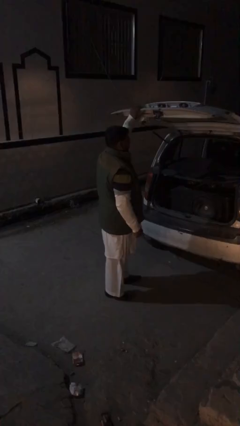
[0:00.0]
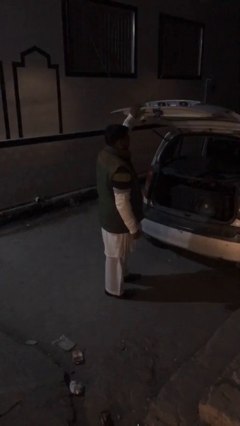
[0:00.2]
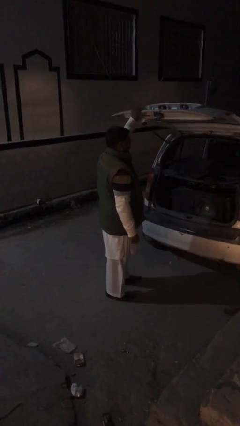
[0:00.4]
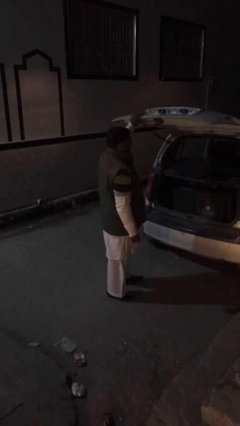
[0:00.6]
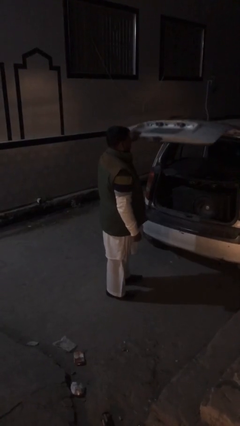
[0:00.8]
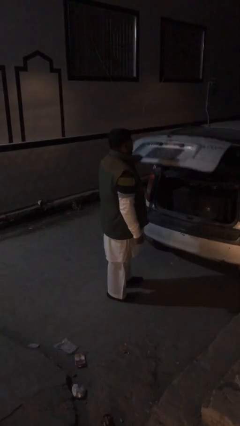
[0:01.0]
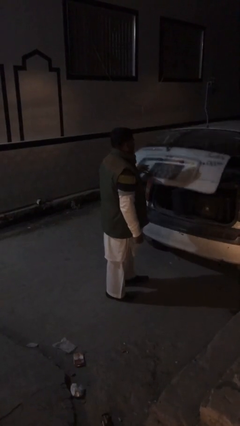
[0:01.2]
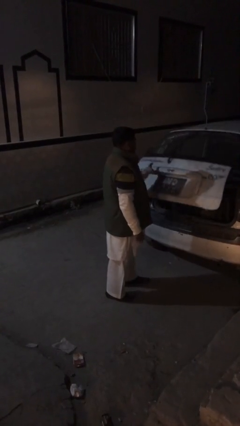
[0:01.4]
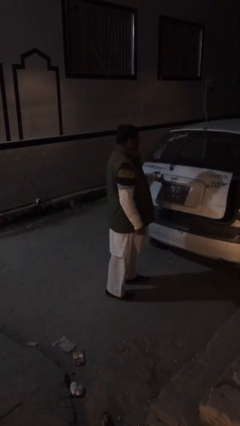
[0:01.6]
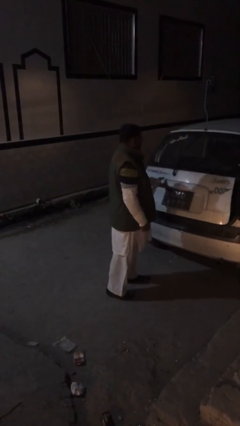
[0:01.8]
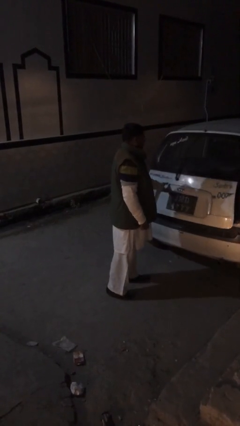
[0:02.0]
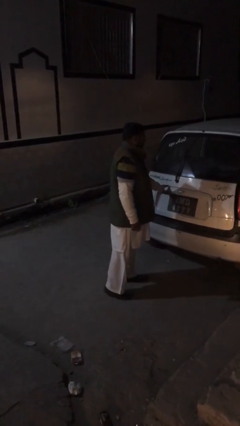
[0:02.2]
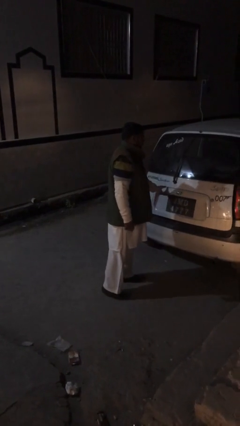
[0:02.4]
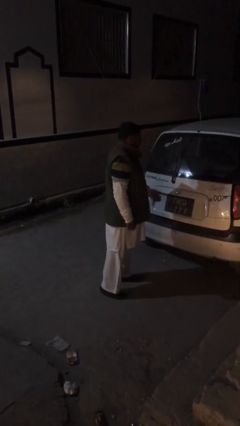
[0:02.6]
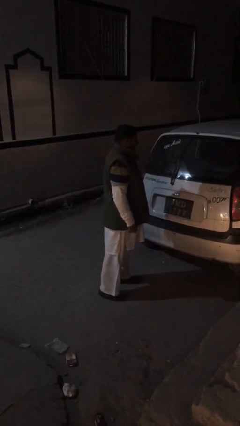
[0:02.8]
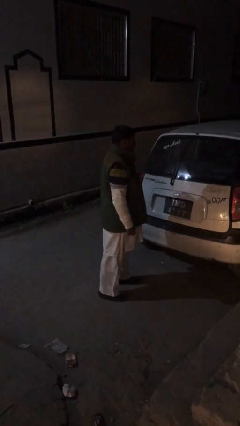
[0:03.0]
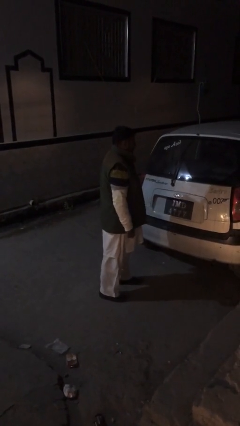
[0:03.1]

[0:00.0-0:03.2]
person closes car trunk

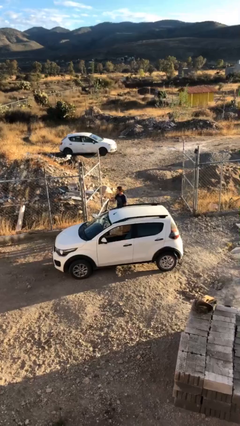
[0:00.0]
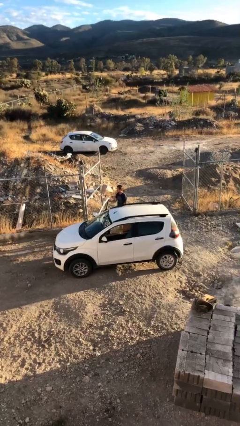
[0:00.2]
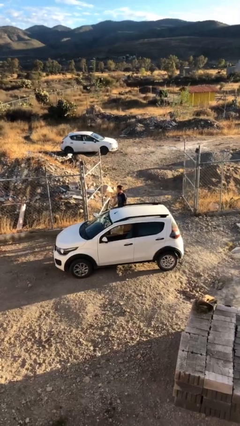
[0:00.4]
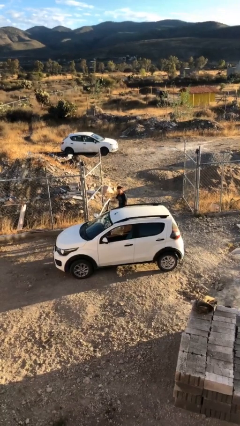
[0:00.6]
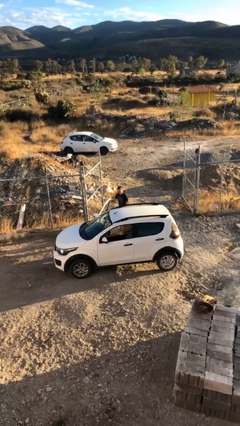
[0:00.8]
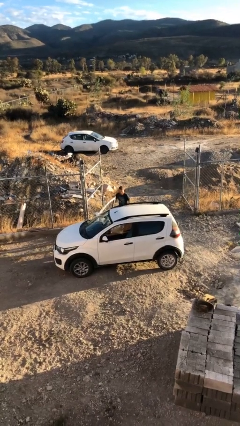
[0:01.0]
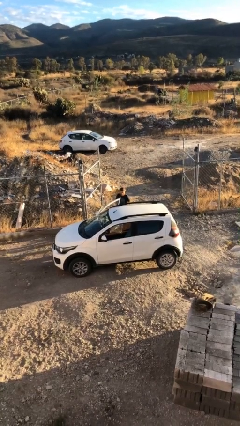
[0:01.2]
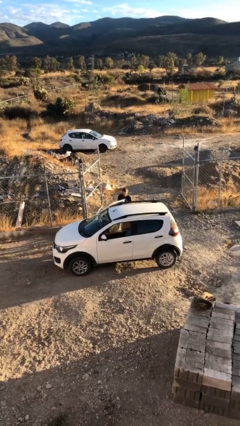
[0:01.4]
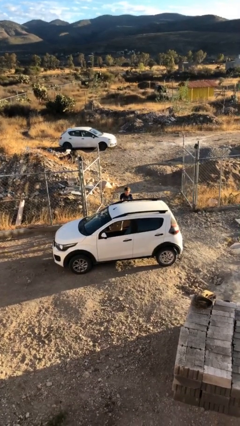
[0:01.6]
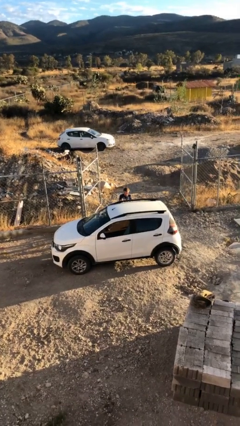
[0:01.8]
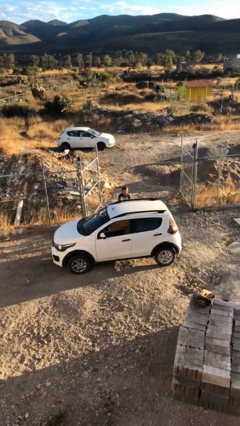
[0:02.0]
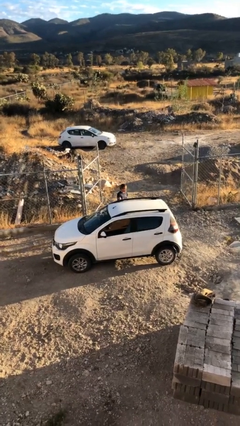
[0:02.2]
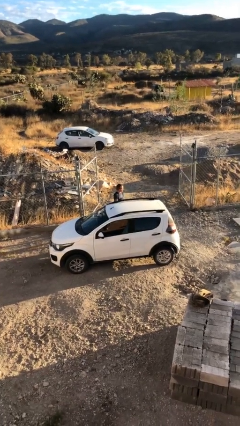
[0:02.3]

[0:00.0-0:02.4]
person closes car door

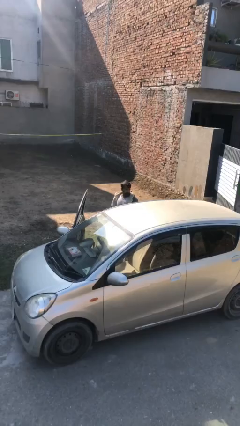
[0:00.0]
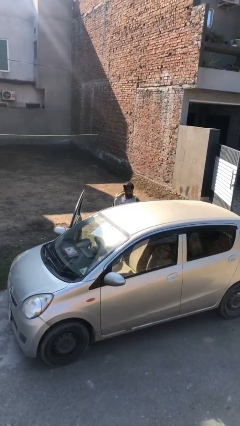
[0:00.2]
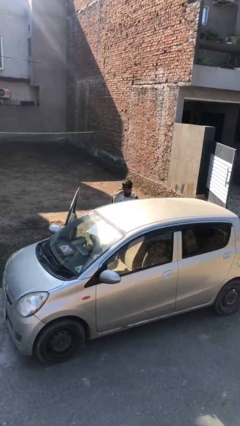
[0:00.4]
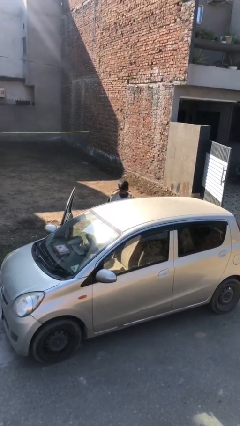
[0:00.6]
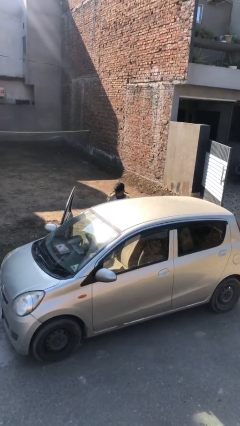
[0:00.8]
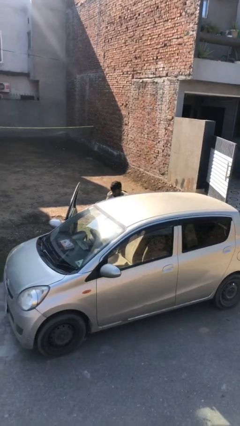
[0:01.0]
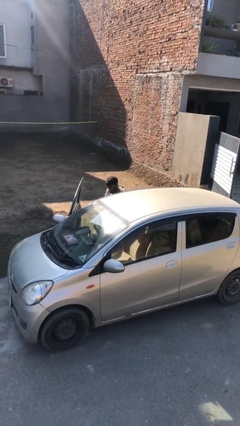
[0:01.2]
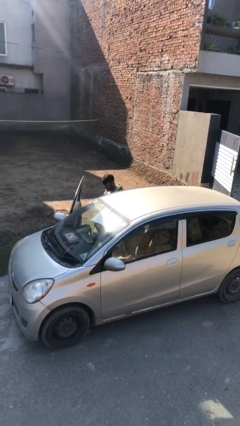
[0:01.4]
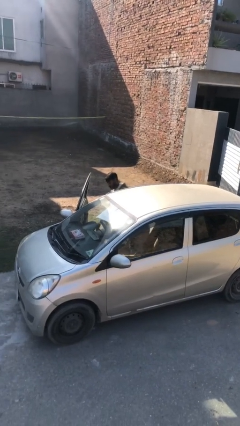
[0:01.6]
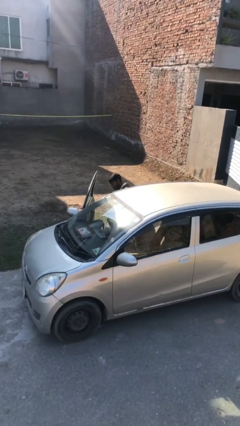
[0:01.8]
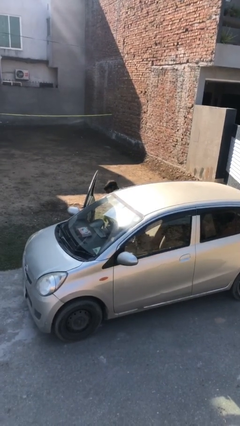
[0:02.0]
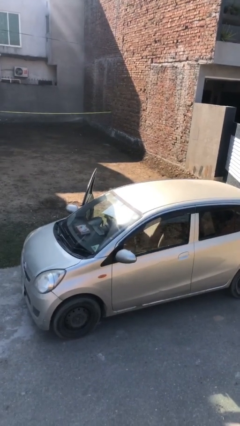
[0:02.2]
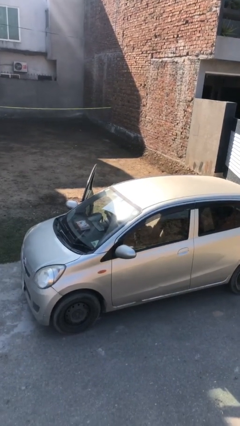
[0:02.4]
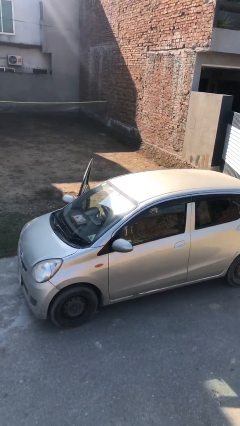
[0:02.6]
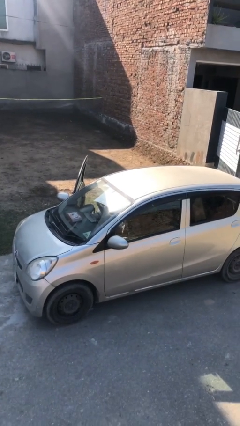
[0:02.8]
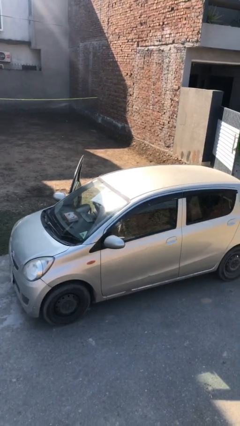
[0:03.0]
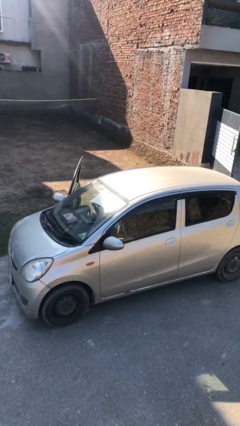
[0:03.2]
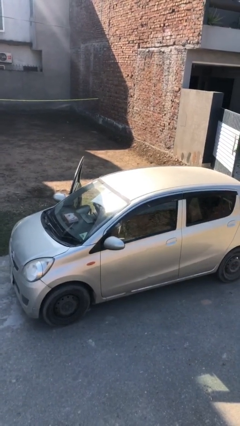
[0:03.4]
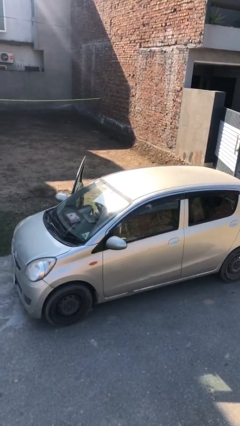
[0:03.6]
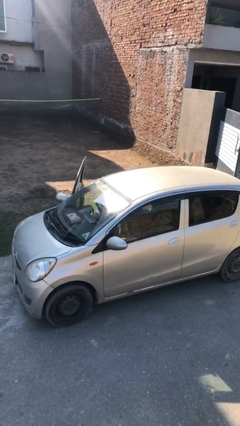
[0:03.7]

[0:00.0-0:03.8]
person enters car

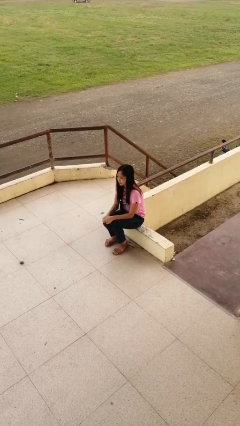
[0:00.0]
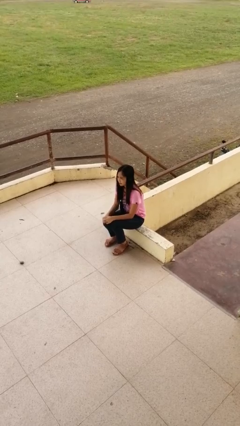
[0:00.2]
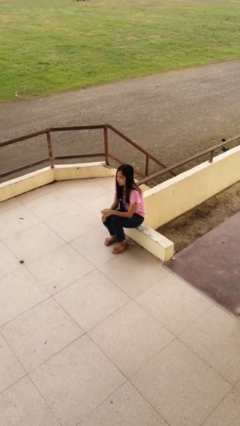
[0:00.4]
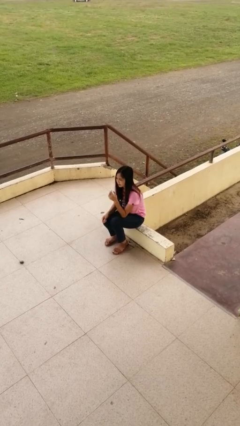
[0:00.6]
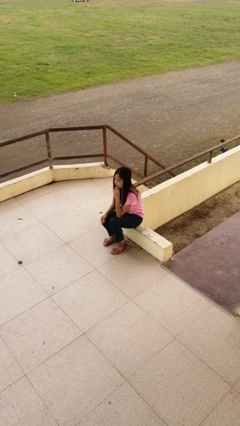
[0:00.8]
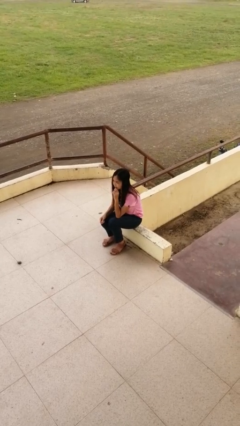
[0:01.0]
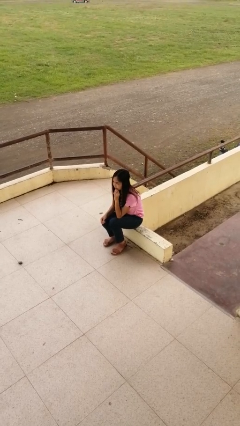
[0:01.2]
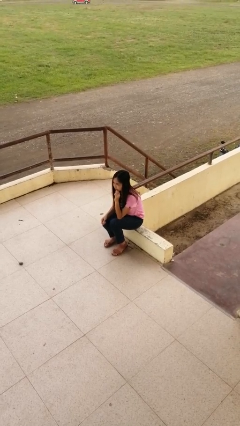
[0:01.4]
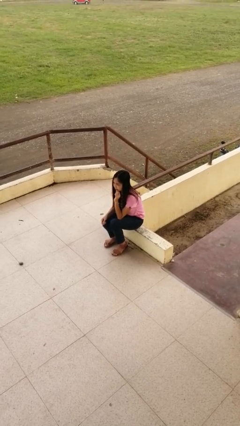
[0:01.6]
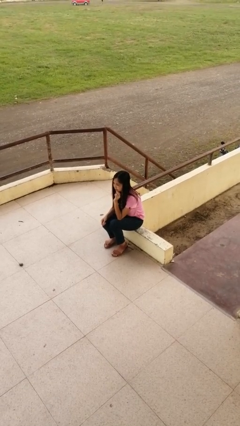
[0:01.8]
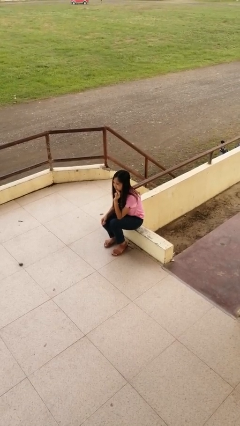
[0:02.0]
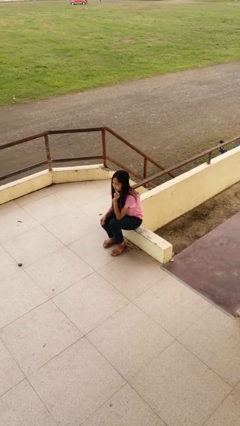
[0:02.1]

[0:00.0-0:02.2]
person strokes chin

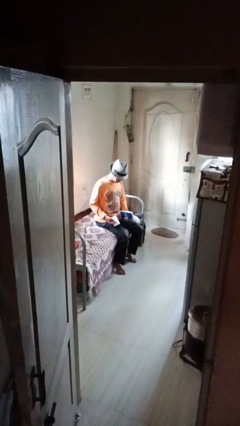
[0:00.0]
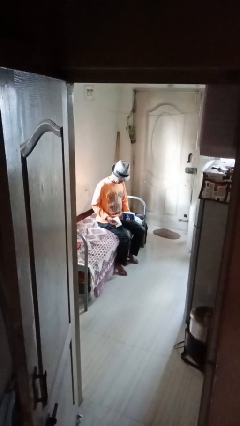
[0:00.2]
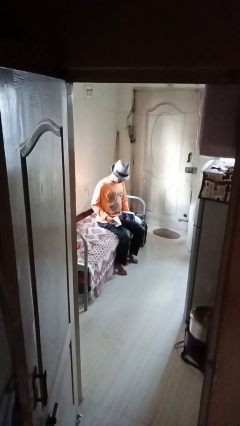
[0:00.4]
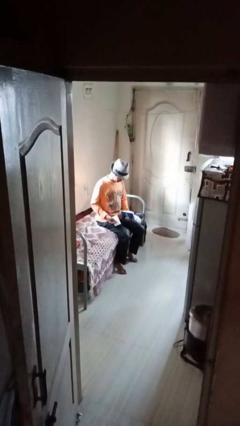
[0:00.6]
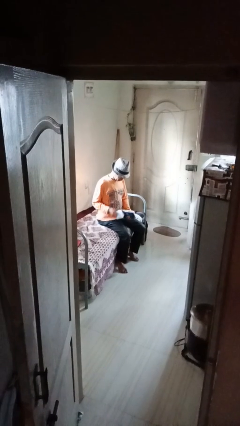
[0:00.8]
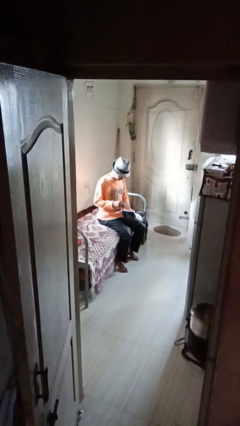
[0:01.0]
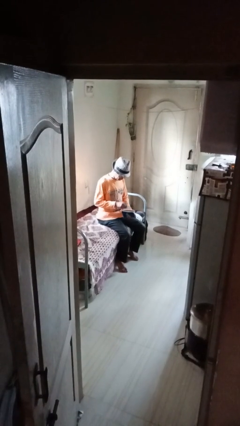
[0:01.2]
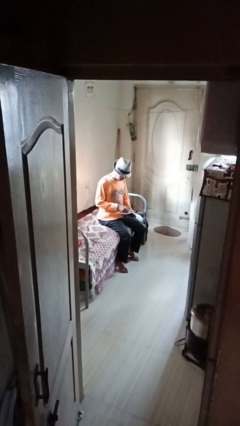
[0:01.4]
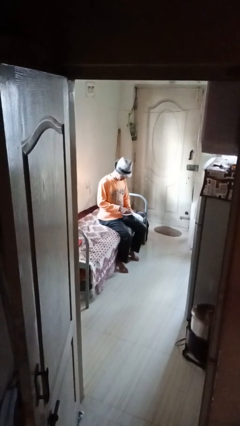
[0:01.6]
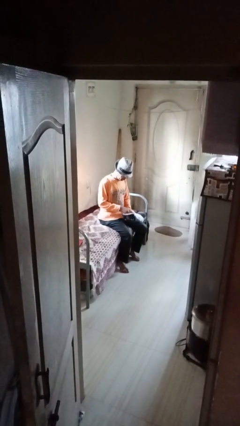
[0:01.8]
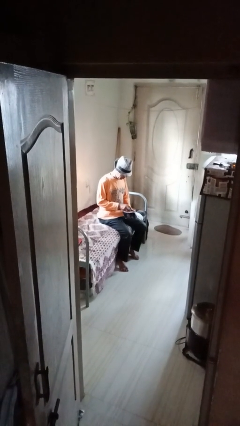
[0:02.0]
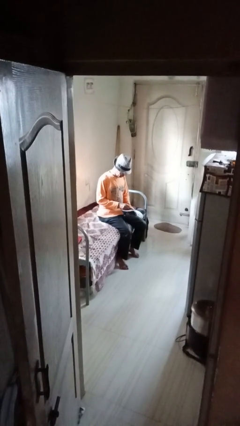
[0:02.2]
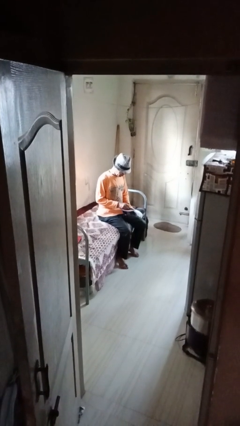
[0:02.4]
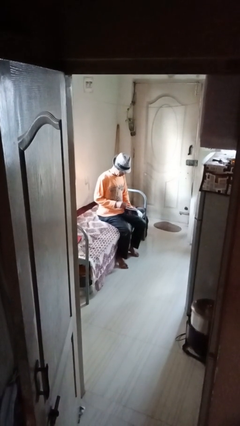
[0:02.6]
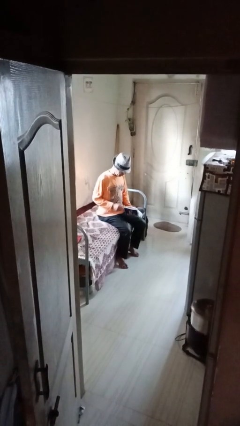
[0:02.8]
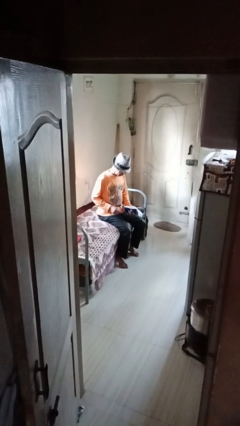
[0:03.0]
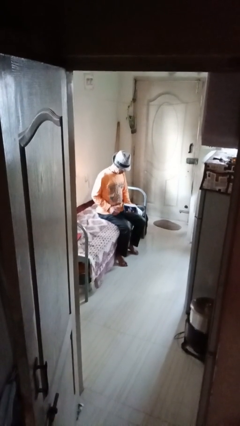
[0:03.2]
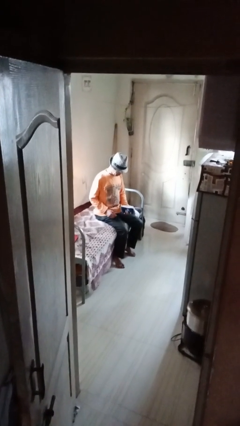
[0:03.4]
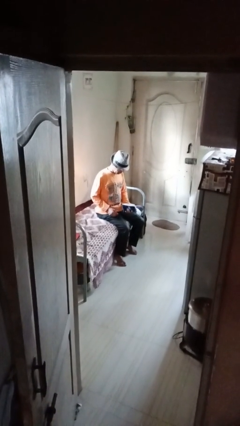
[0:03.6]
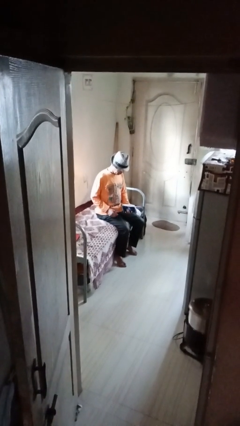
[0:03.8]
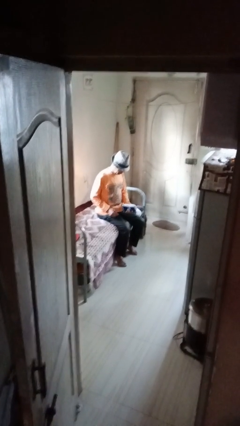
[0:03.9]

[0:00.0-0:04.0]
person puts object into purse

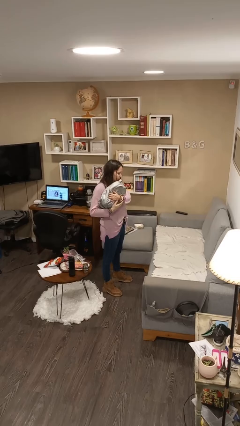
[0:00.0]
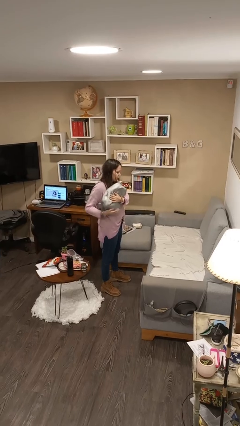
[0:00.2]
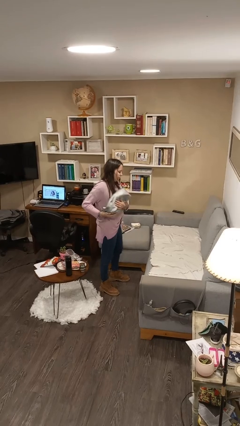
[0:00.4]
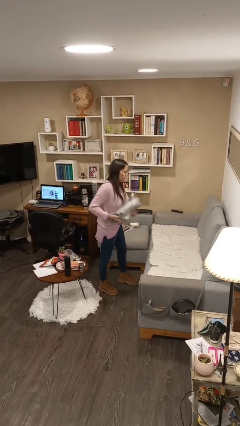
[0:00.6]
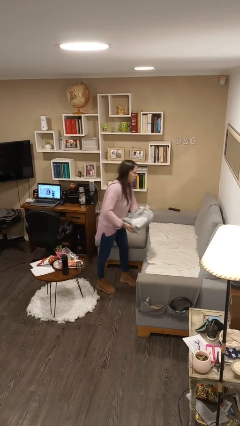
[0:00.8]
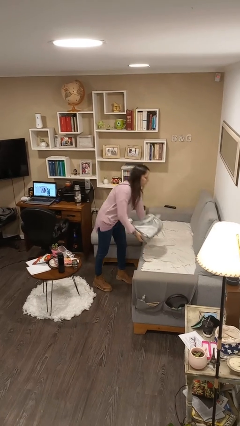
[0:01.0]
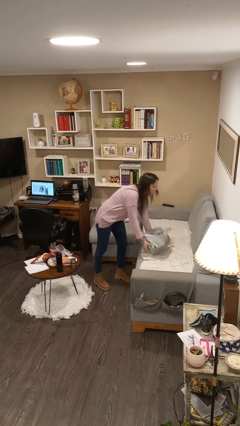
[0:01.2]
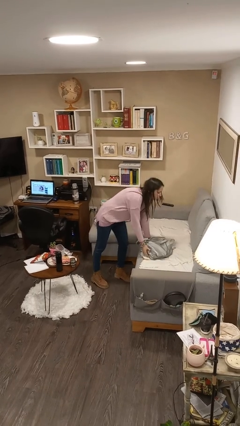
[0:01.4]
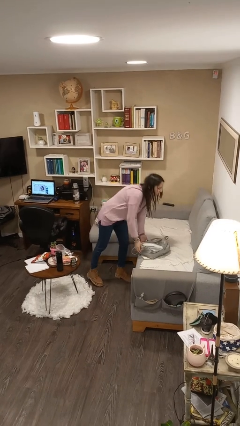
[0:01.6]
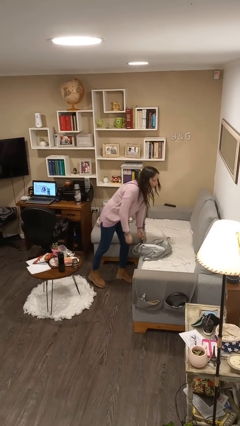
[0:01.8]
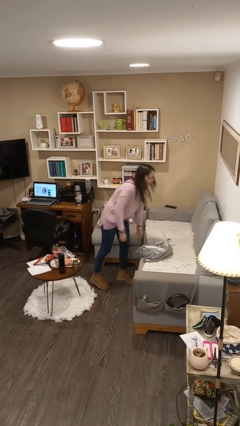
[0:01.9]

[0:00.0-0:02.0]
person puts down object on couch
